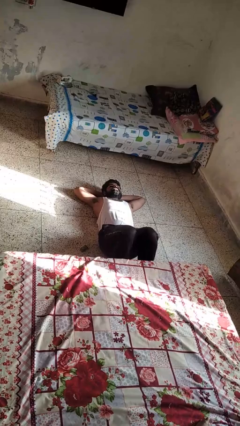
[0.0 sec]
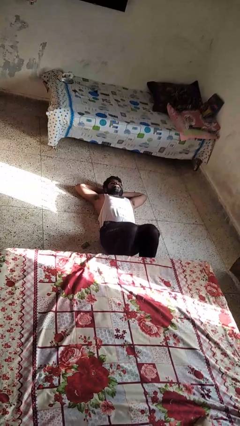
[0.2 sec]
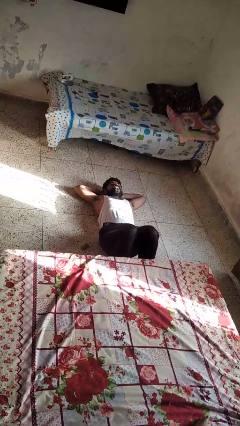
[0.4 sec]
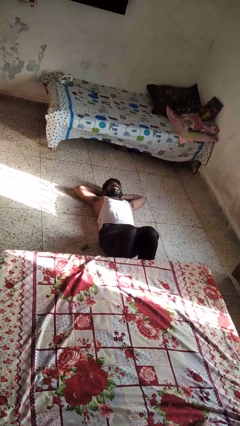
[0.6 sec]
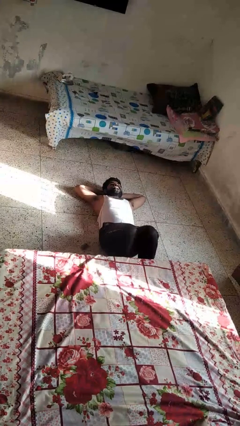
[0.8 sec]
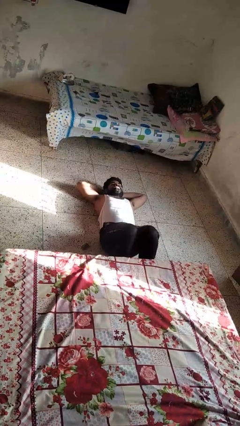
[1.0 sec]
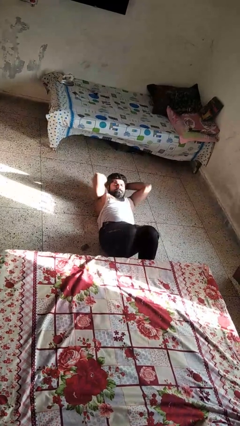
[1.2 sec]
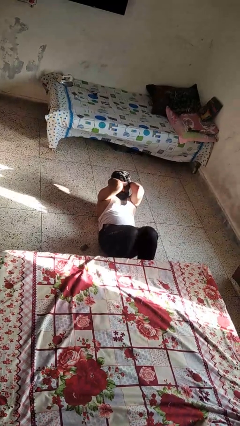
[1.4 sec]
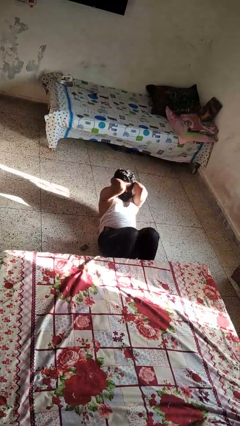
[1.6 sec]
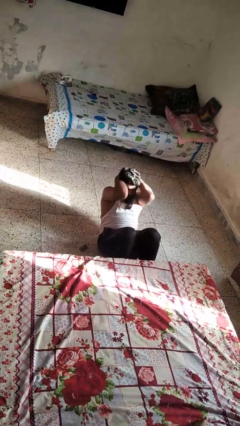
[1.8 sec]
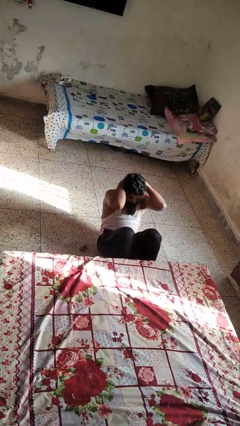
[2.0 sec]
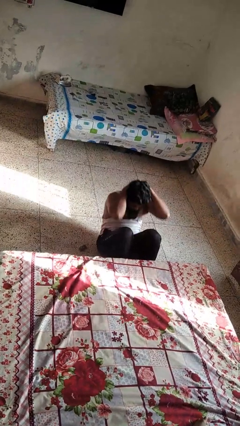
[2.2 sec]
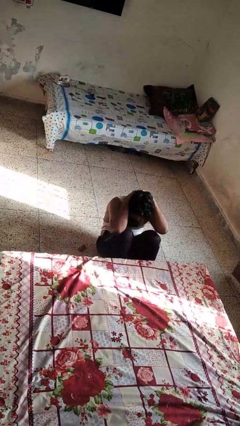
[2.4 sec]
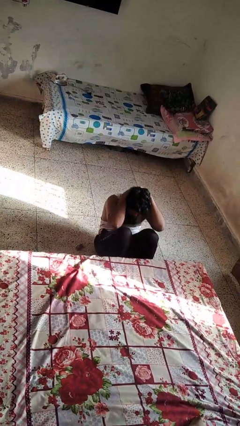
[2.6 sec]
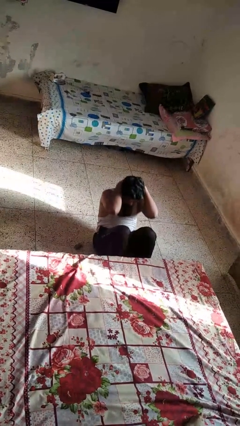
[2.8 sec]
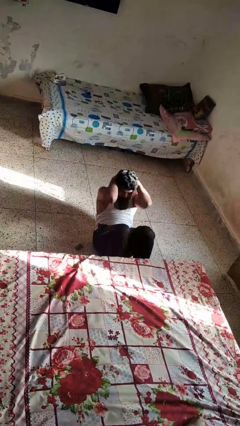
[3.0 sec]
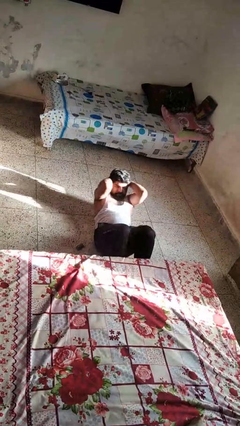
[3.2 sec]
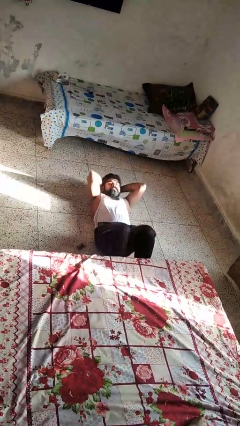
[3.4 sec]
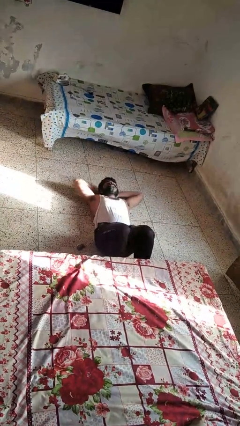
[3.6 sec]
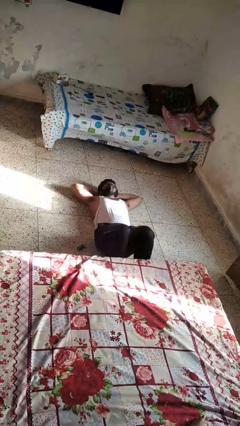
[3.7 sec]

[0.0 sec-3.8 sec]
person exercises with situp

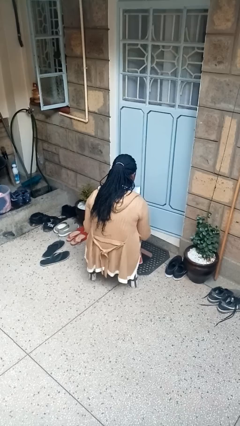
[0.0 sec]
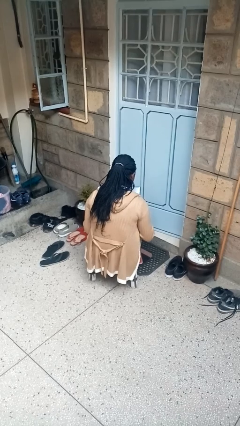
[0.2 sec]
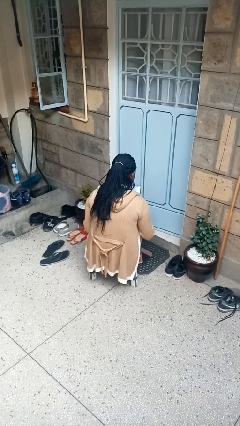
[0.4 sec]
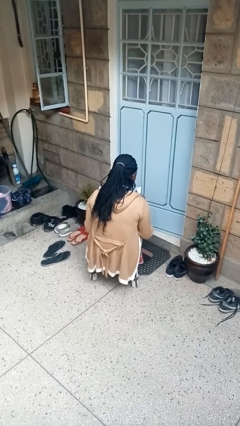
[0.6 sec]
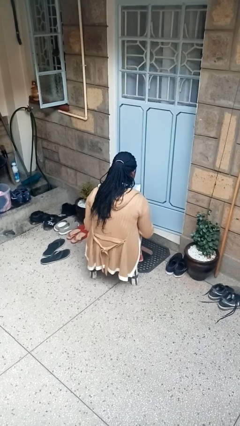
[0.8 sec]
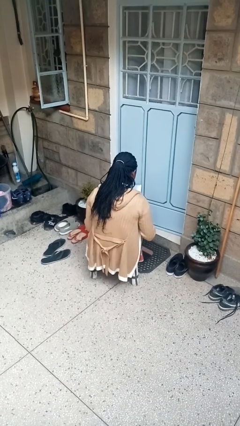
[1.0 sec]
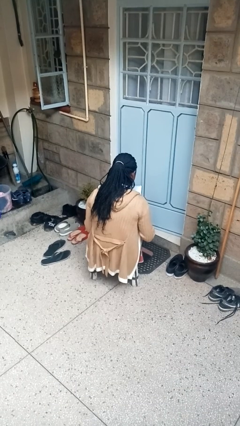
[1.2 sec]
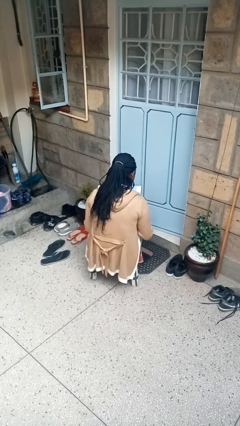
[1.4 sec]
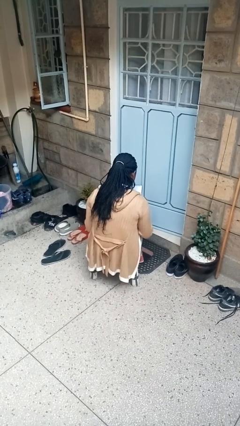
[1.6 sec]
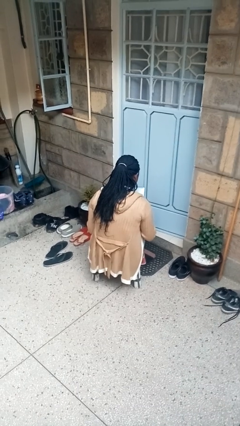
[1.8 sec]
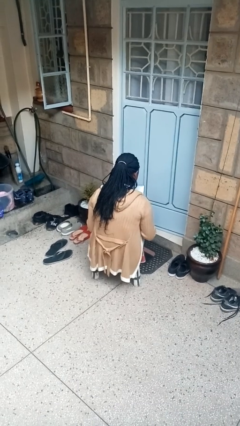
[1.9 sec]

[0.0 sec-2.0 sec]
person interacts with tablet

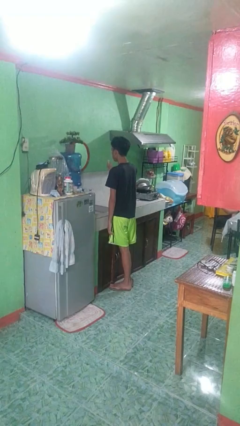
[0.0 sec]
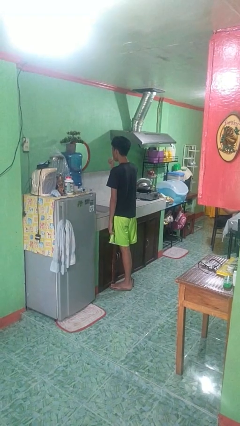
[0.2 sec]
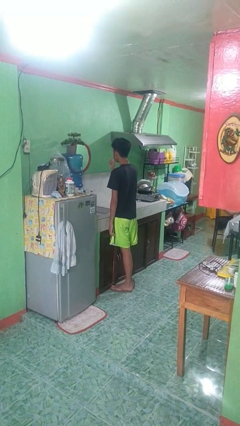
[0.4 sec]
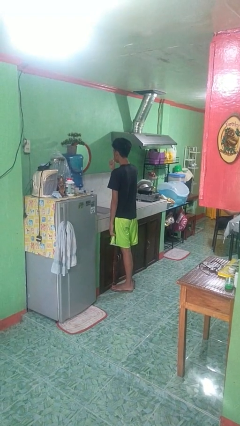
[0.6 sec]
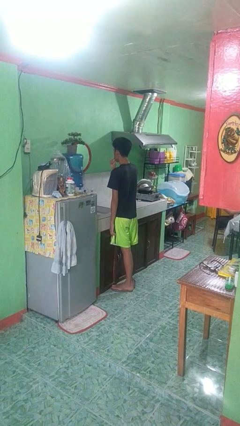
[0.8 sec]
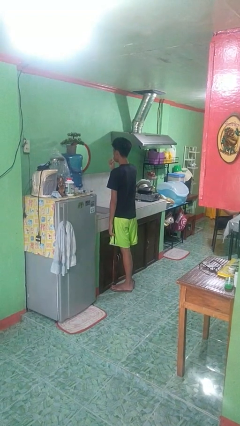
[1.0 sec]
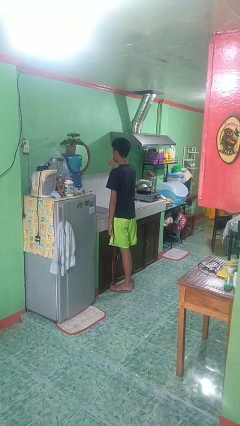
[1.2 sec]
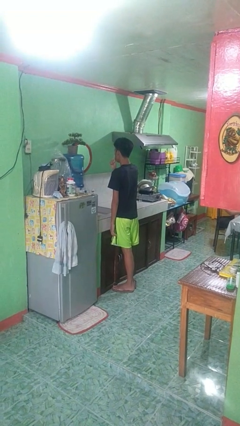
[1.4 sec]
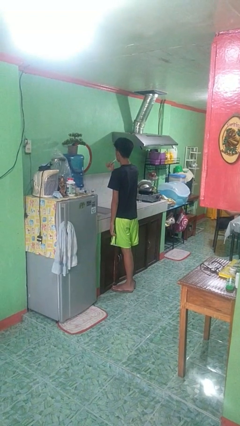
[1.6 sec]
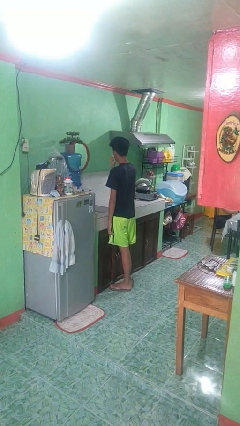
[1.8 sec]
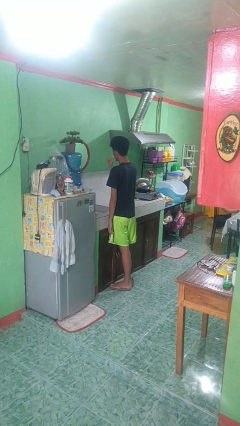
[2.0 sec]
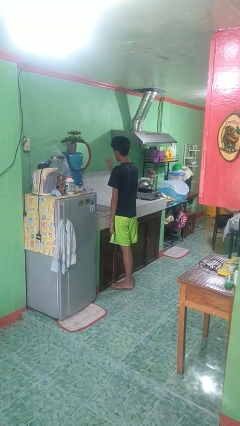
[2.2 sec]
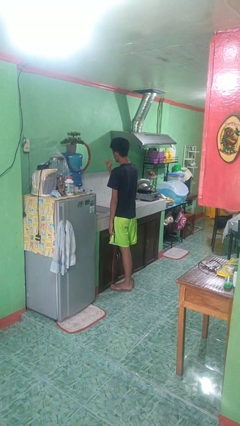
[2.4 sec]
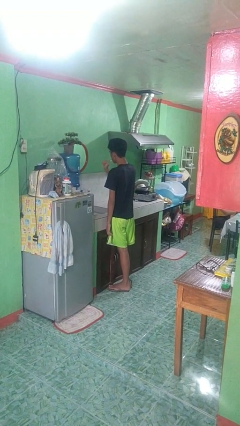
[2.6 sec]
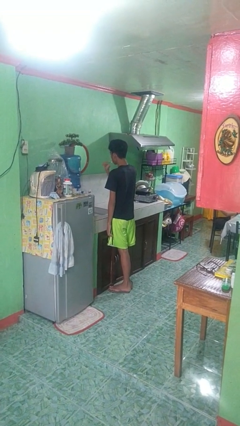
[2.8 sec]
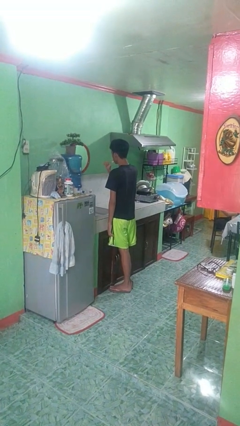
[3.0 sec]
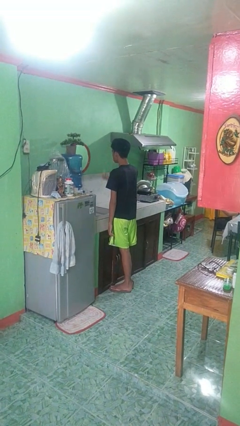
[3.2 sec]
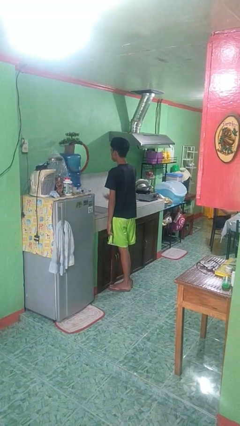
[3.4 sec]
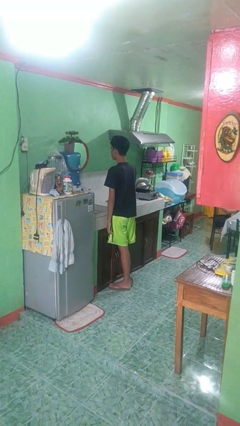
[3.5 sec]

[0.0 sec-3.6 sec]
person brushes teeth

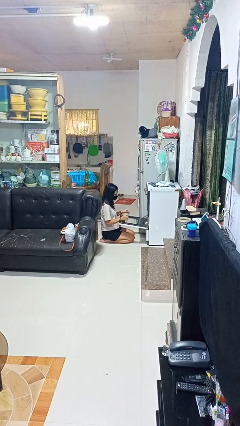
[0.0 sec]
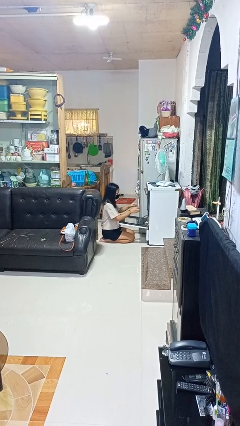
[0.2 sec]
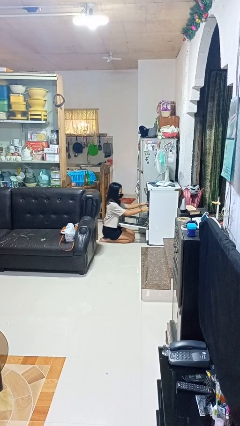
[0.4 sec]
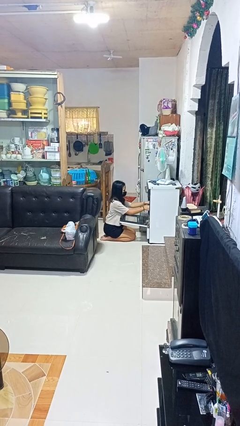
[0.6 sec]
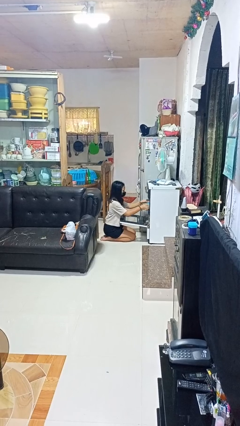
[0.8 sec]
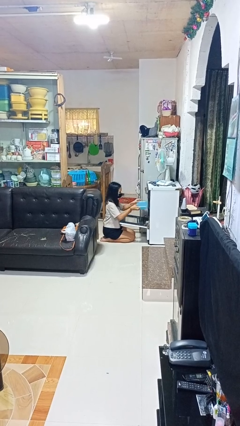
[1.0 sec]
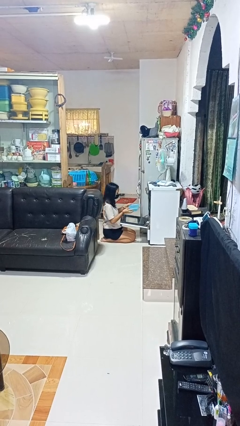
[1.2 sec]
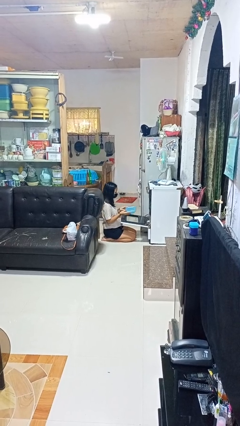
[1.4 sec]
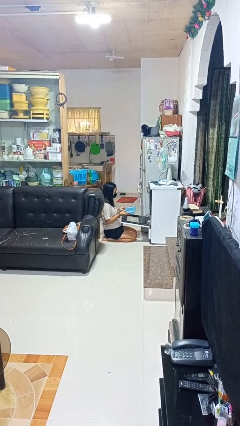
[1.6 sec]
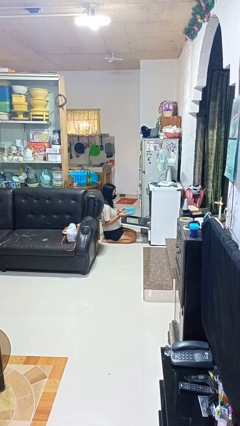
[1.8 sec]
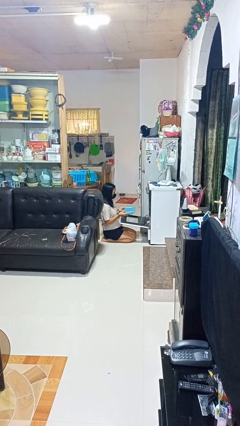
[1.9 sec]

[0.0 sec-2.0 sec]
person takes object from oven

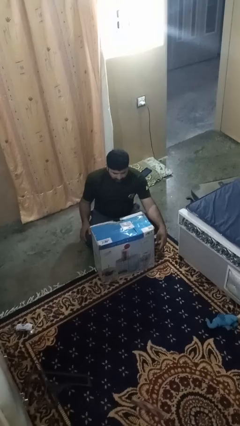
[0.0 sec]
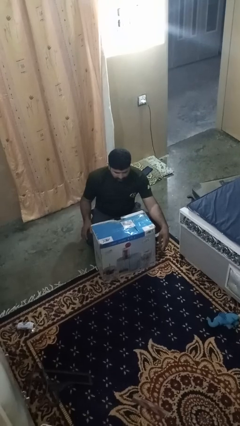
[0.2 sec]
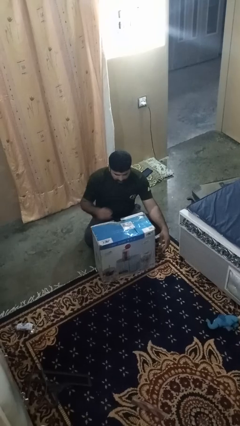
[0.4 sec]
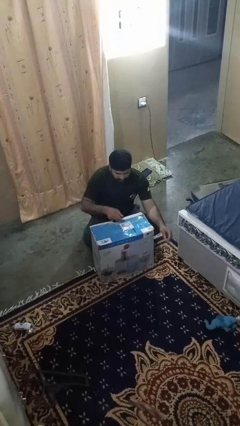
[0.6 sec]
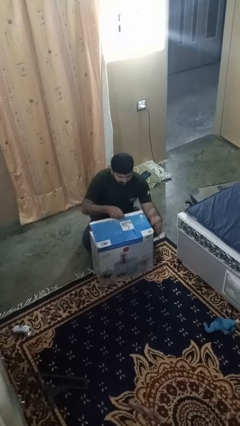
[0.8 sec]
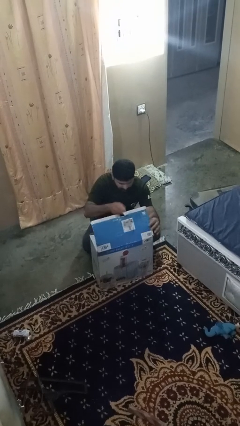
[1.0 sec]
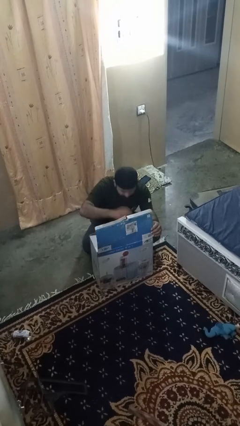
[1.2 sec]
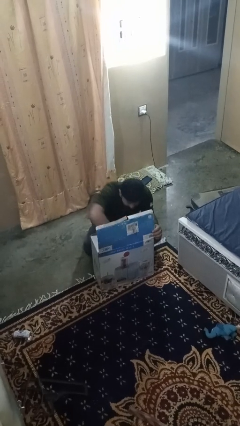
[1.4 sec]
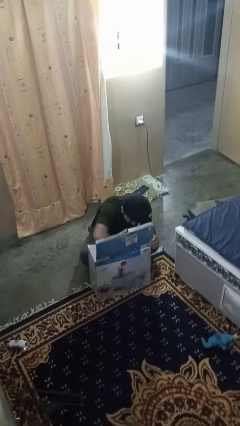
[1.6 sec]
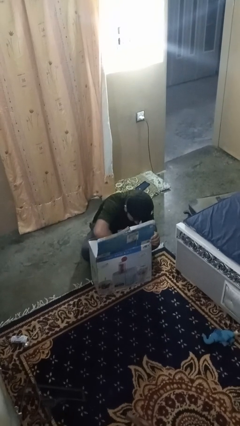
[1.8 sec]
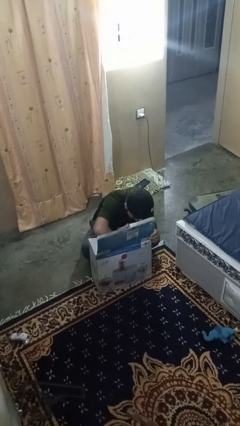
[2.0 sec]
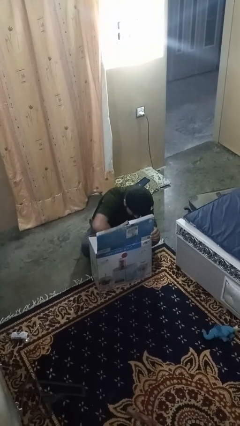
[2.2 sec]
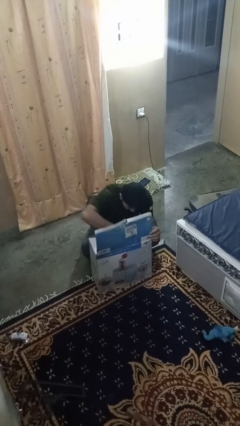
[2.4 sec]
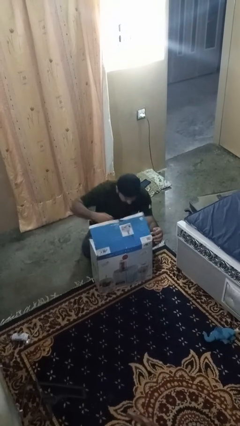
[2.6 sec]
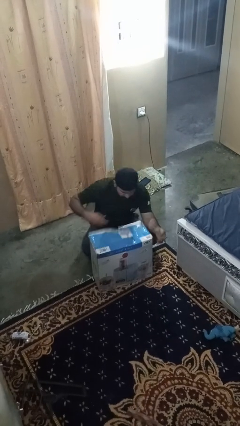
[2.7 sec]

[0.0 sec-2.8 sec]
person searches in box

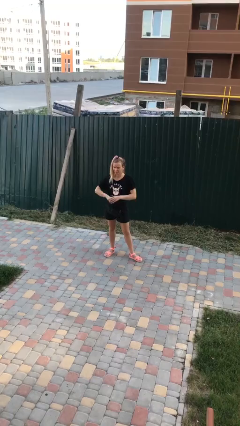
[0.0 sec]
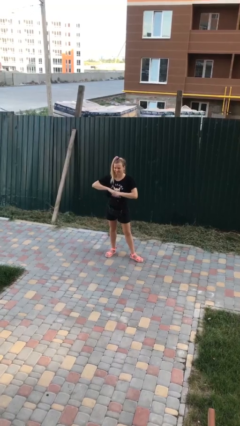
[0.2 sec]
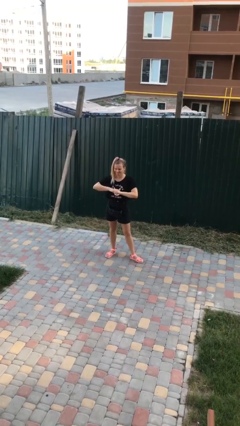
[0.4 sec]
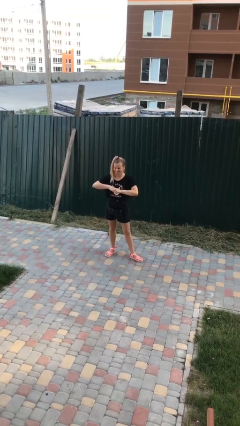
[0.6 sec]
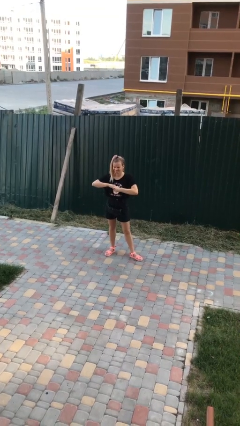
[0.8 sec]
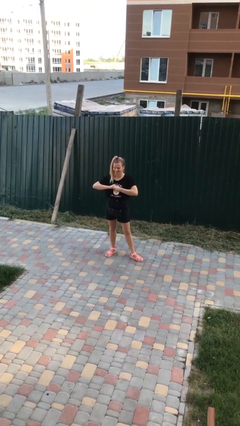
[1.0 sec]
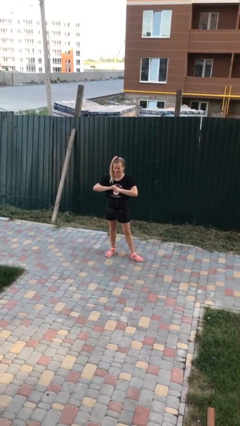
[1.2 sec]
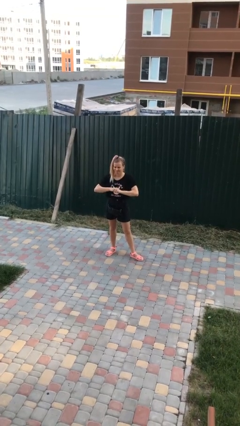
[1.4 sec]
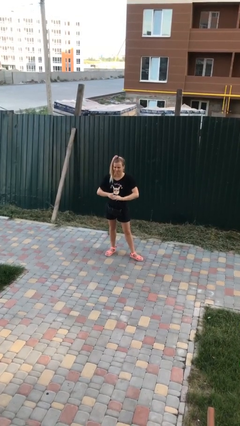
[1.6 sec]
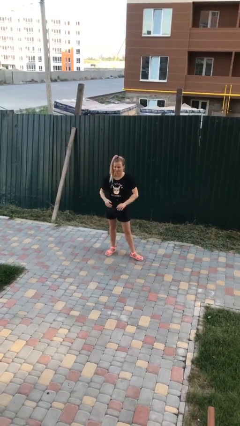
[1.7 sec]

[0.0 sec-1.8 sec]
person cracks knuckles

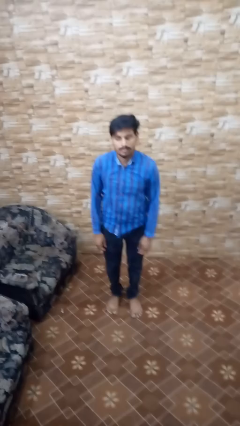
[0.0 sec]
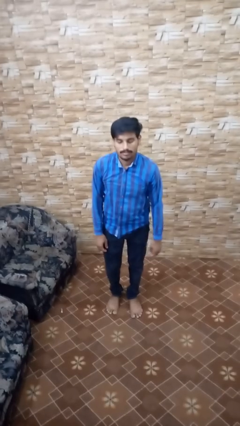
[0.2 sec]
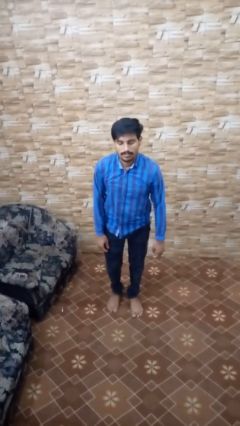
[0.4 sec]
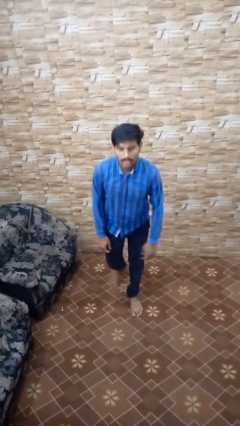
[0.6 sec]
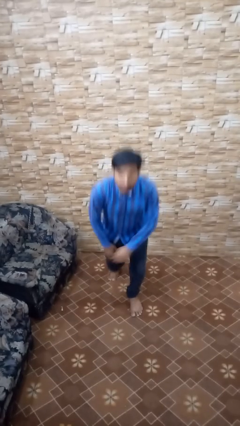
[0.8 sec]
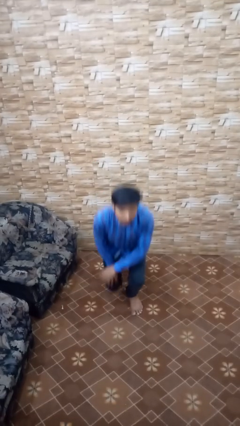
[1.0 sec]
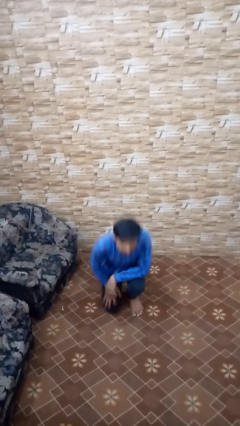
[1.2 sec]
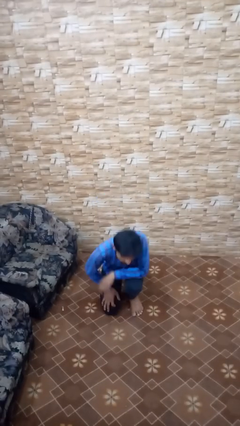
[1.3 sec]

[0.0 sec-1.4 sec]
person kneels
